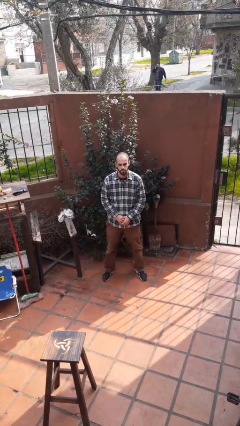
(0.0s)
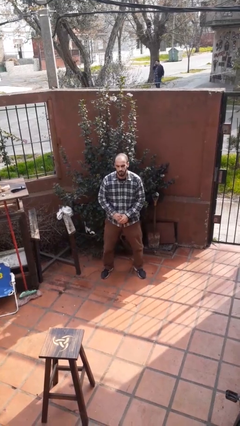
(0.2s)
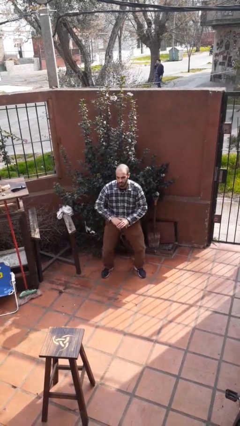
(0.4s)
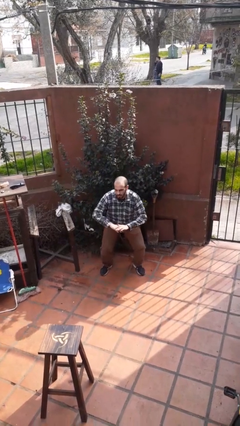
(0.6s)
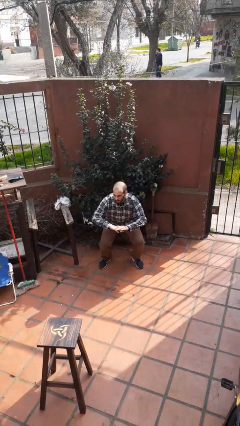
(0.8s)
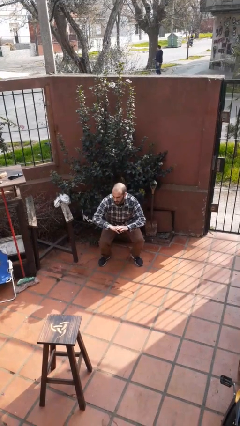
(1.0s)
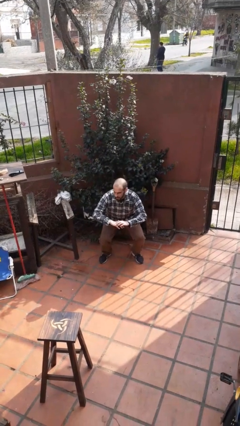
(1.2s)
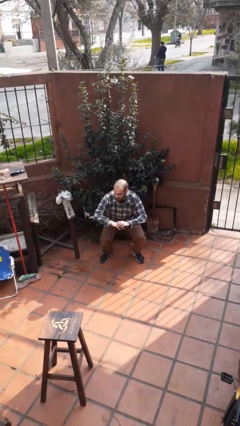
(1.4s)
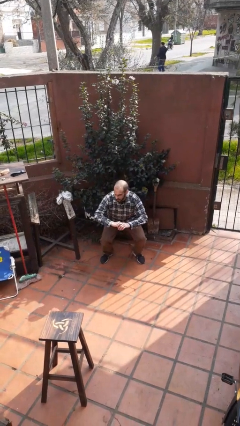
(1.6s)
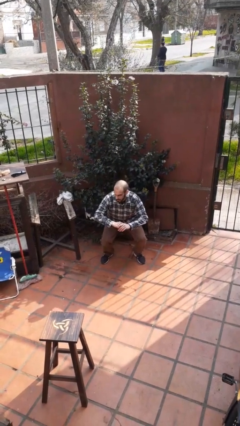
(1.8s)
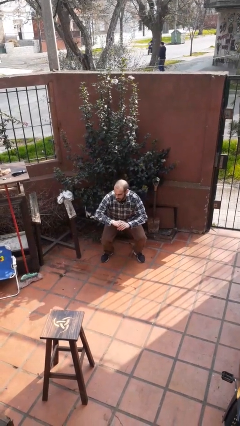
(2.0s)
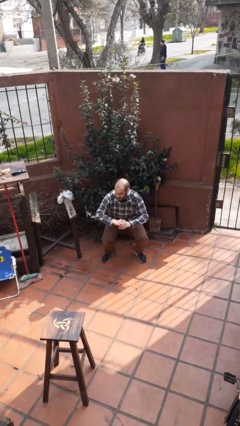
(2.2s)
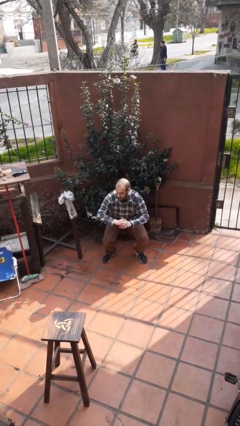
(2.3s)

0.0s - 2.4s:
person squats

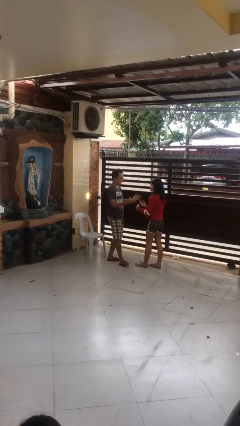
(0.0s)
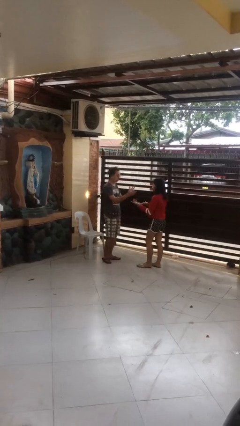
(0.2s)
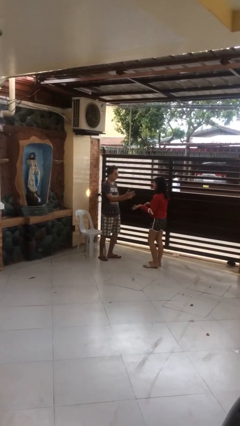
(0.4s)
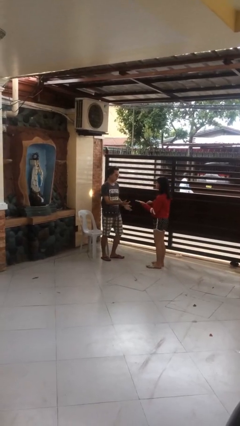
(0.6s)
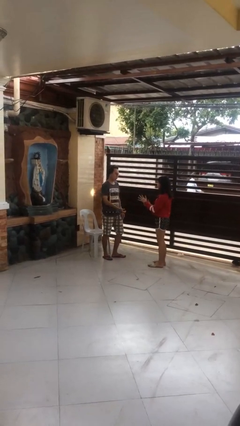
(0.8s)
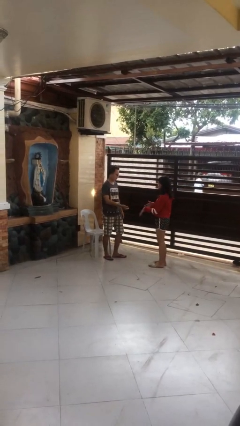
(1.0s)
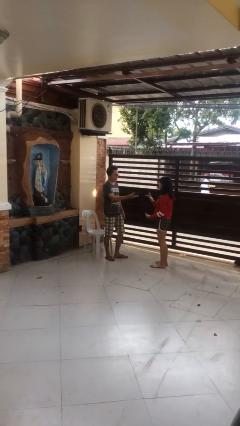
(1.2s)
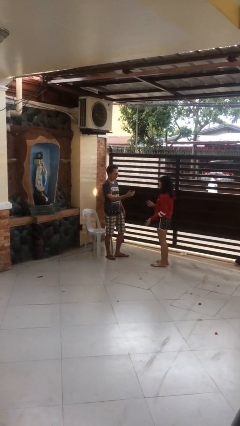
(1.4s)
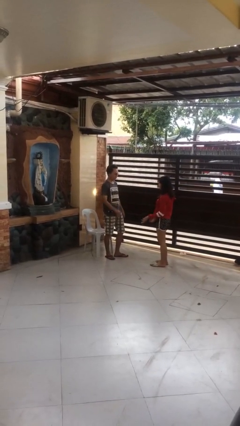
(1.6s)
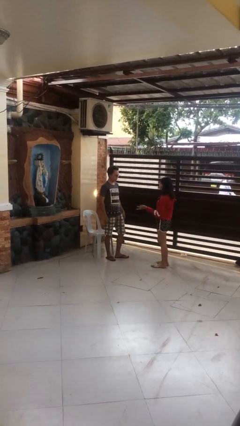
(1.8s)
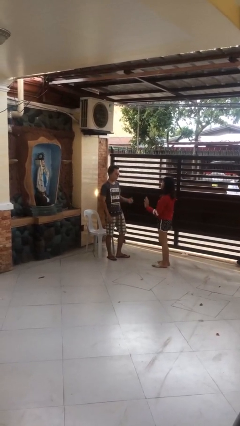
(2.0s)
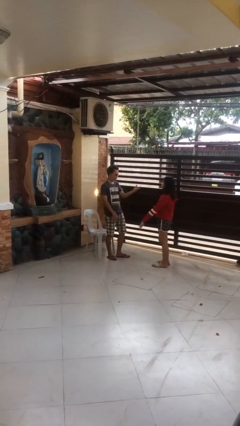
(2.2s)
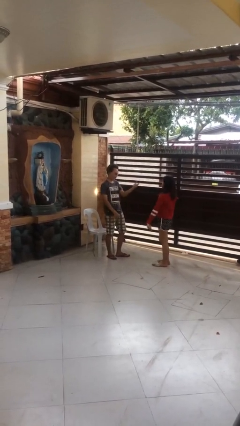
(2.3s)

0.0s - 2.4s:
person talks to person

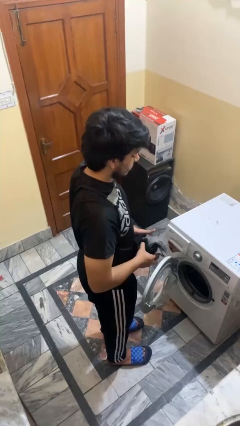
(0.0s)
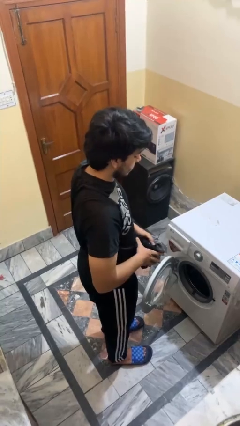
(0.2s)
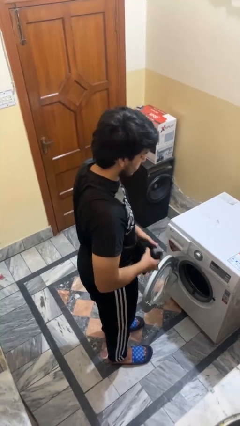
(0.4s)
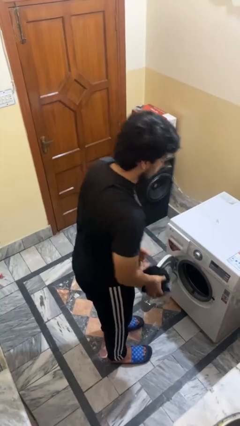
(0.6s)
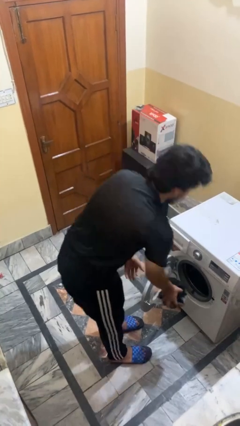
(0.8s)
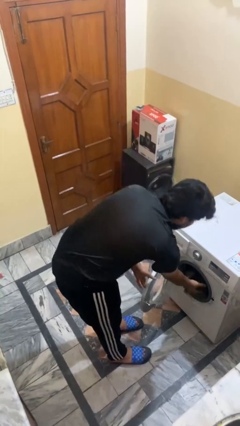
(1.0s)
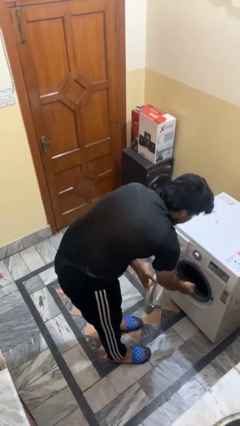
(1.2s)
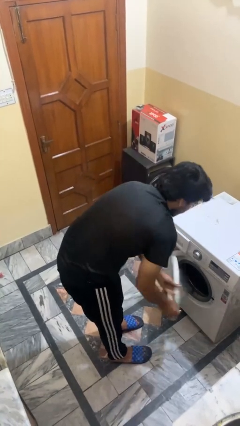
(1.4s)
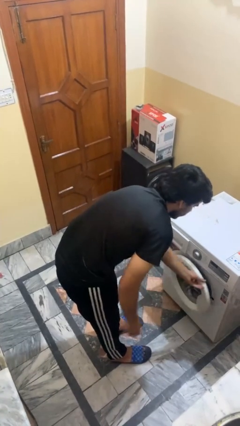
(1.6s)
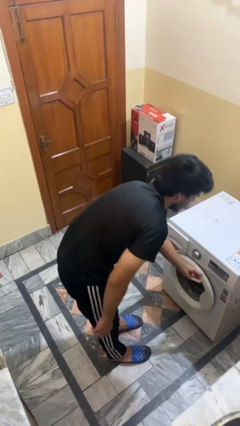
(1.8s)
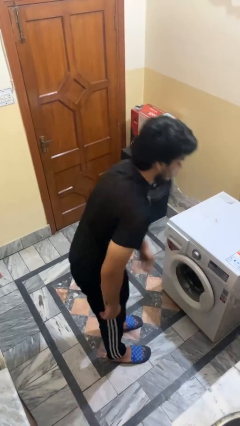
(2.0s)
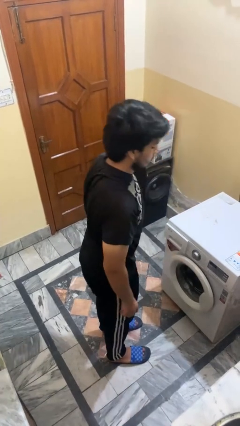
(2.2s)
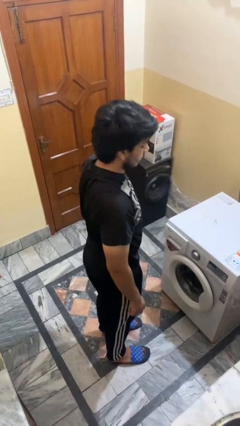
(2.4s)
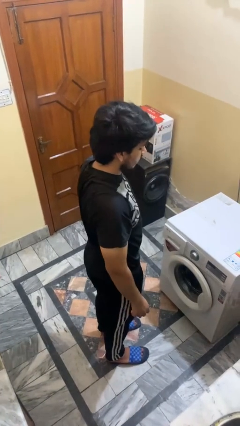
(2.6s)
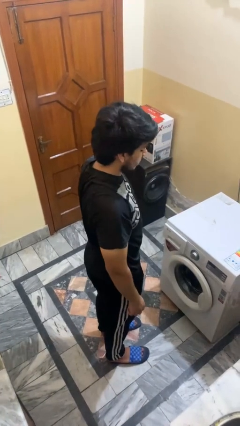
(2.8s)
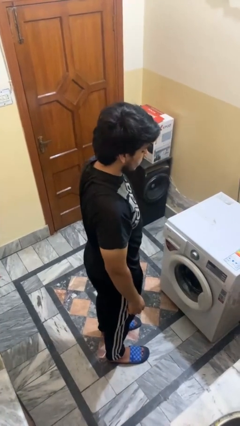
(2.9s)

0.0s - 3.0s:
person loads dryer

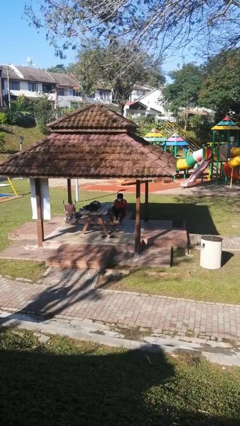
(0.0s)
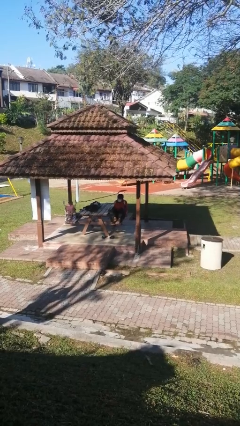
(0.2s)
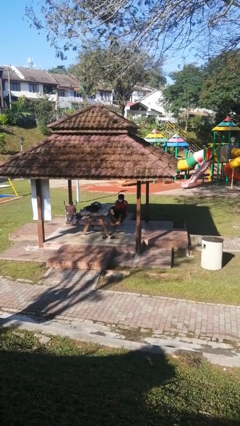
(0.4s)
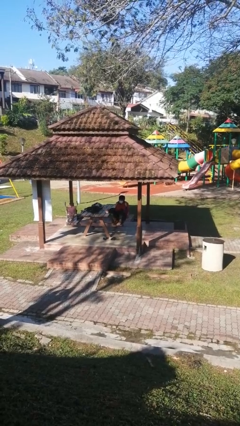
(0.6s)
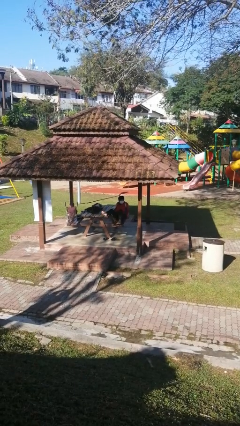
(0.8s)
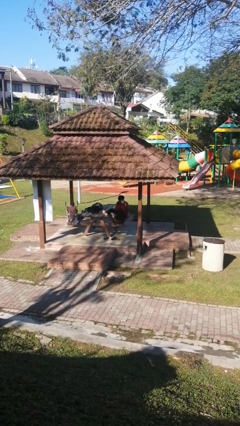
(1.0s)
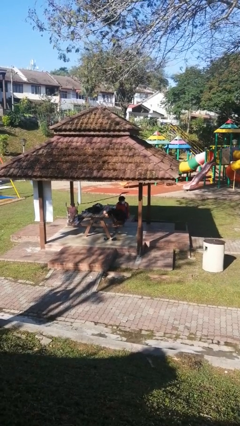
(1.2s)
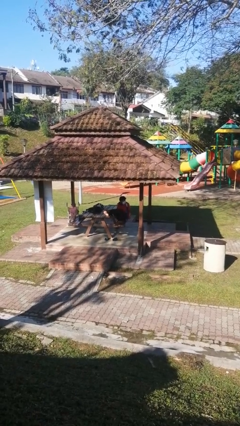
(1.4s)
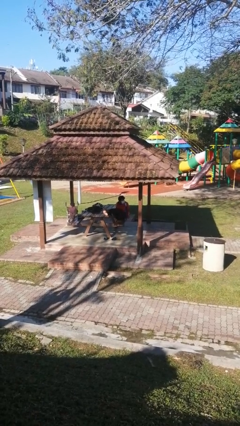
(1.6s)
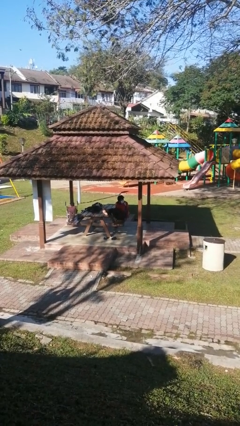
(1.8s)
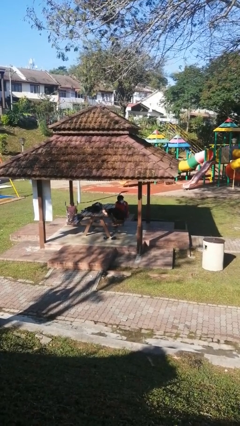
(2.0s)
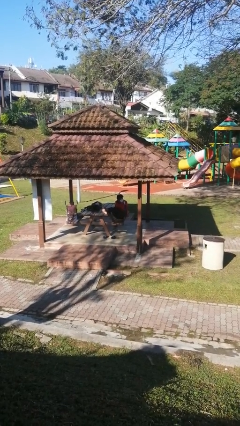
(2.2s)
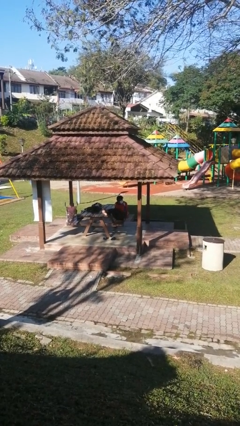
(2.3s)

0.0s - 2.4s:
person puts feet up

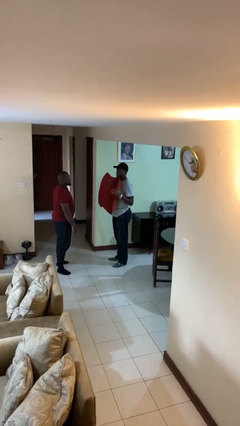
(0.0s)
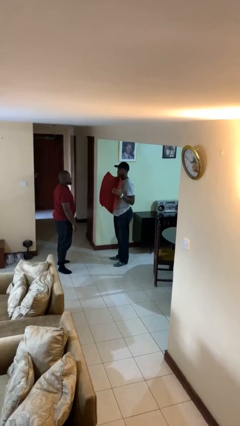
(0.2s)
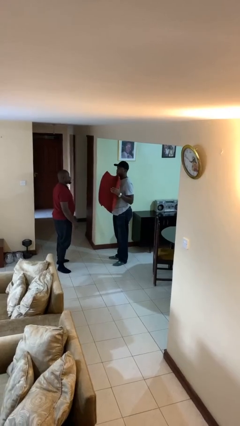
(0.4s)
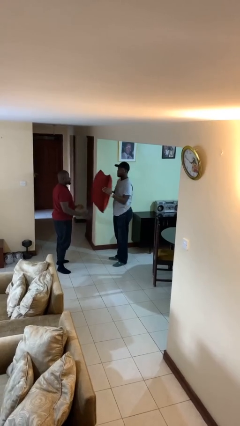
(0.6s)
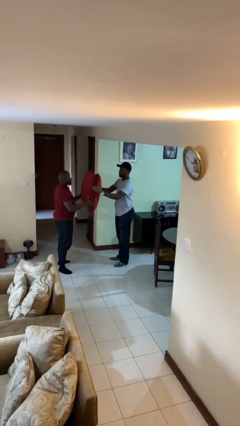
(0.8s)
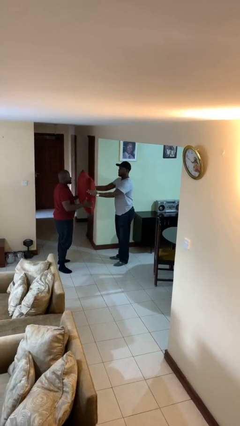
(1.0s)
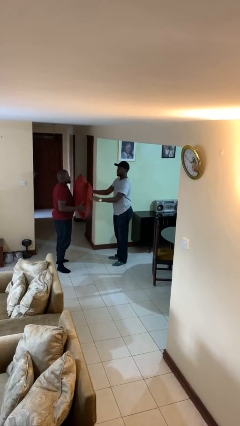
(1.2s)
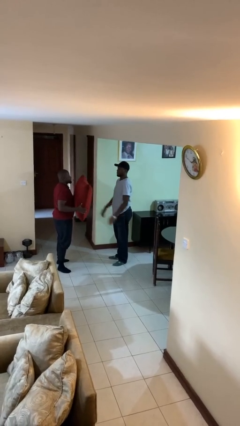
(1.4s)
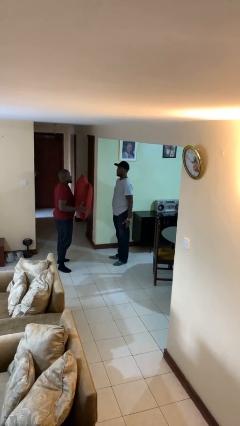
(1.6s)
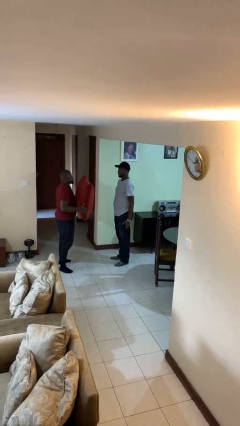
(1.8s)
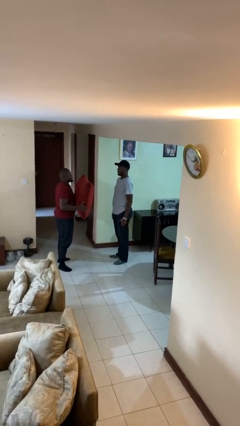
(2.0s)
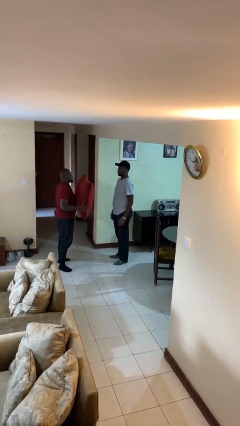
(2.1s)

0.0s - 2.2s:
person transfers object to person

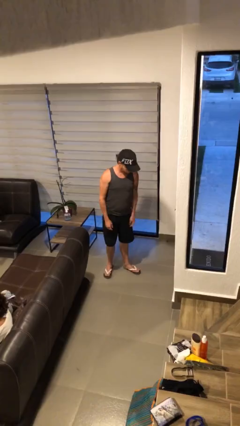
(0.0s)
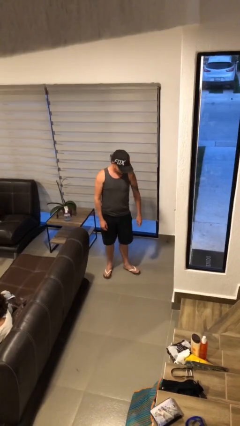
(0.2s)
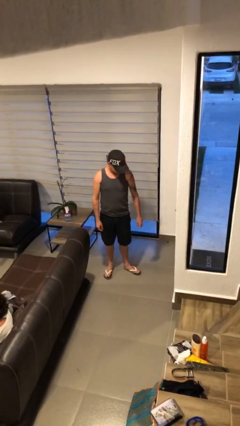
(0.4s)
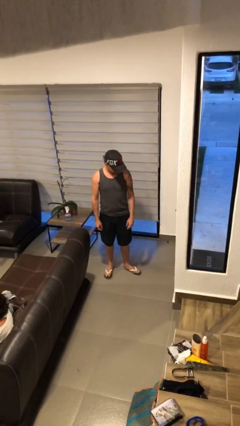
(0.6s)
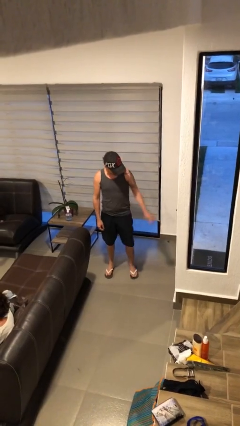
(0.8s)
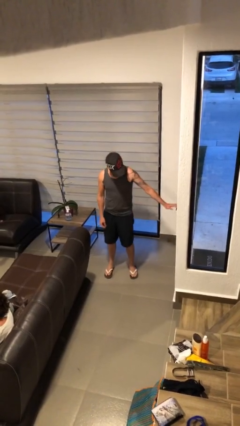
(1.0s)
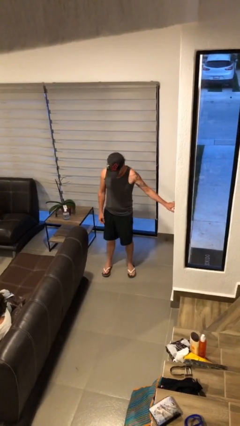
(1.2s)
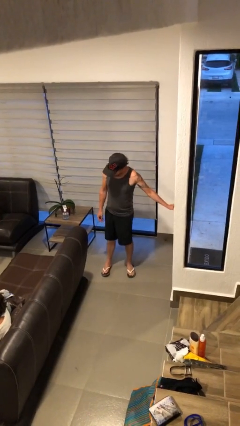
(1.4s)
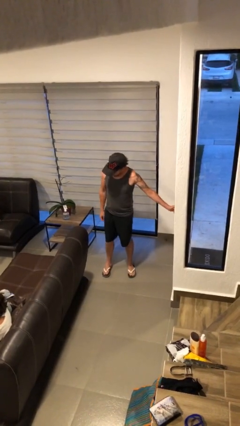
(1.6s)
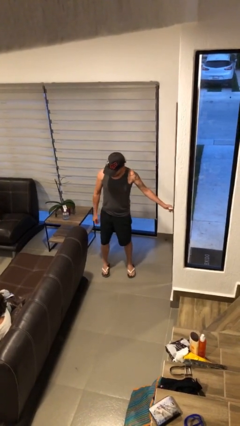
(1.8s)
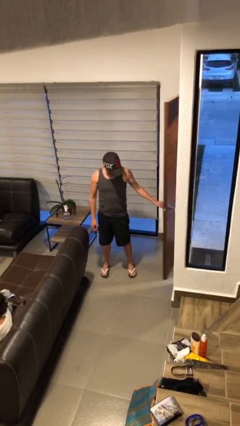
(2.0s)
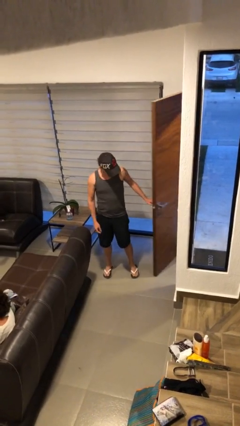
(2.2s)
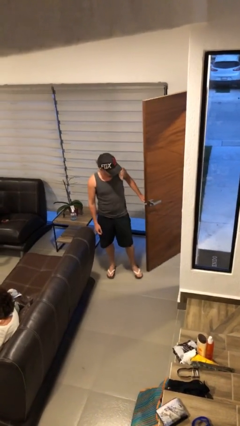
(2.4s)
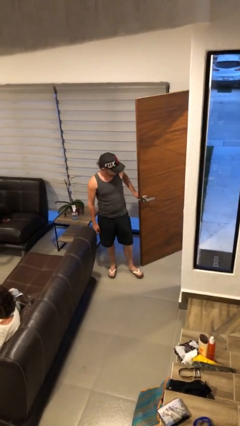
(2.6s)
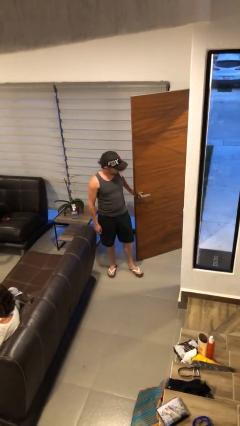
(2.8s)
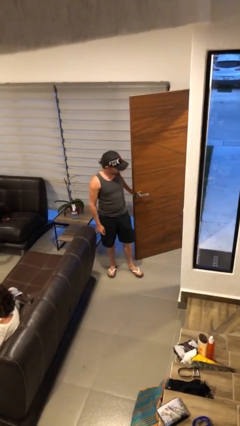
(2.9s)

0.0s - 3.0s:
person opens facility door

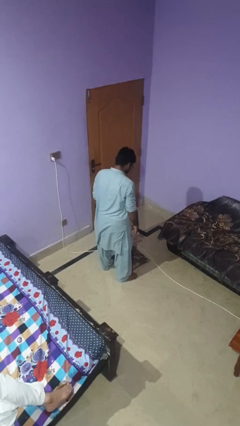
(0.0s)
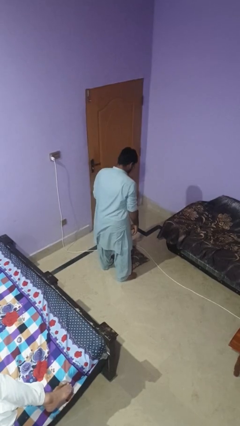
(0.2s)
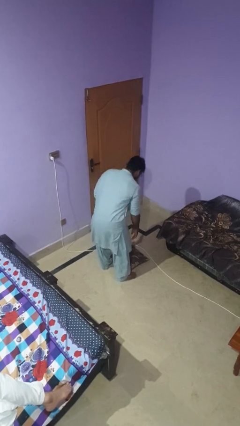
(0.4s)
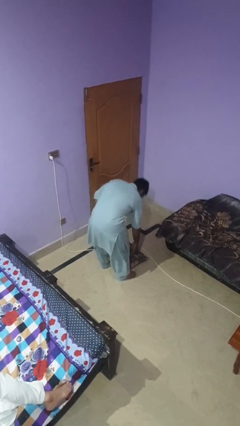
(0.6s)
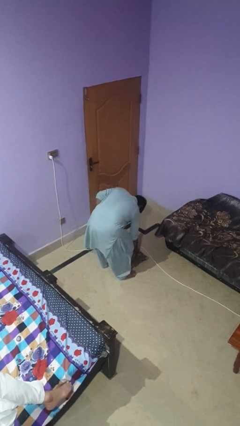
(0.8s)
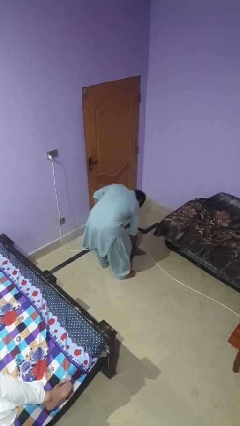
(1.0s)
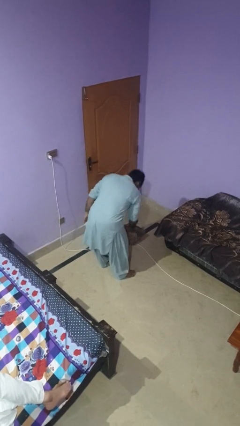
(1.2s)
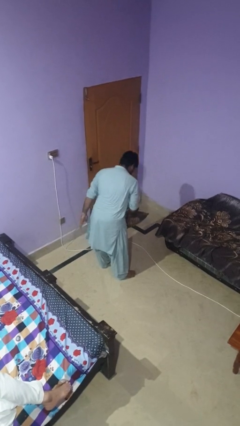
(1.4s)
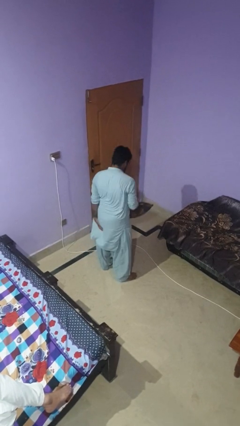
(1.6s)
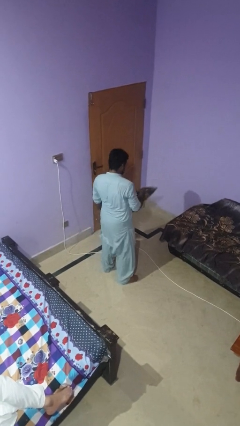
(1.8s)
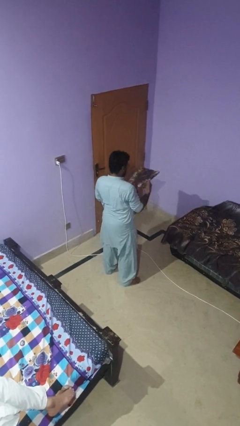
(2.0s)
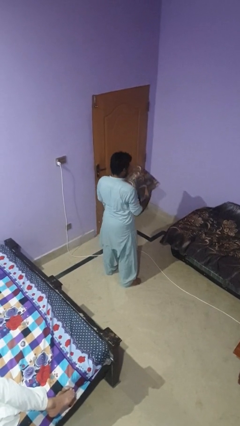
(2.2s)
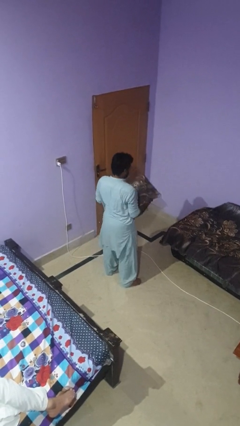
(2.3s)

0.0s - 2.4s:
person picks up object from floor
